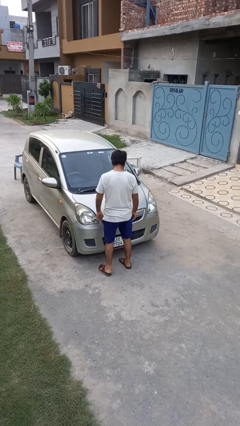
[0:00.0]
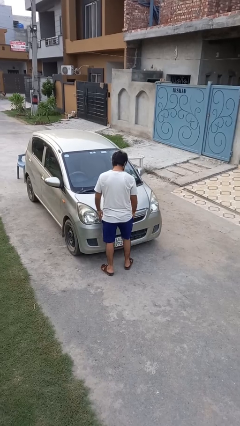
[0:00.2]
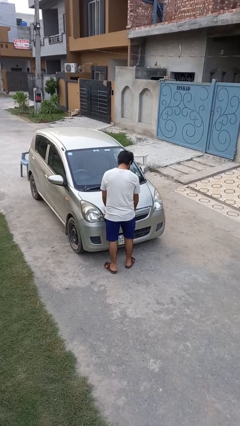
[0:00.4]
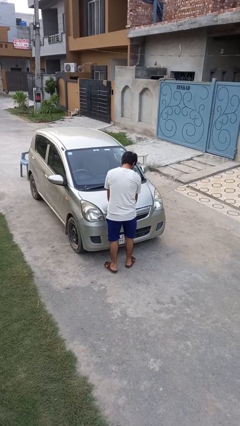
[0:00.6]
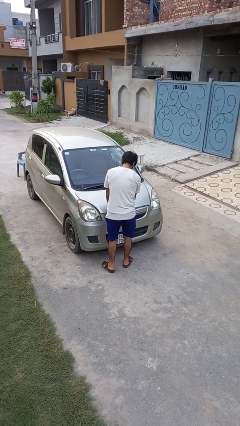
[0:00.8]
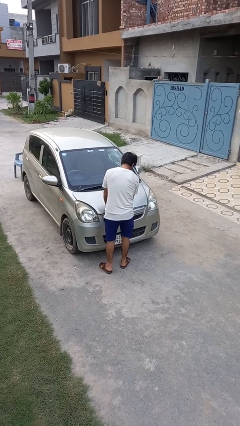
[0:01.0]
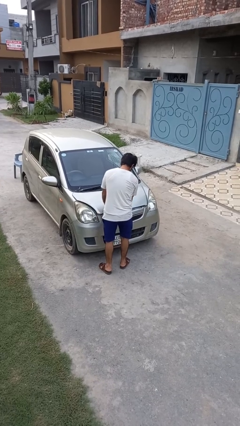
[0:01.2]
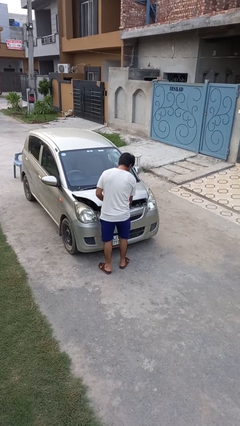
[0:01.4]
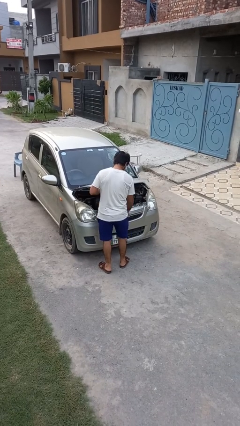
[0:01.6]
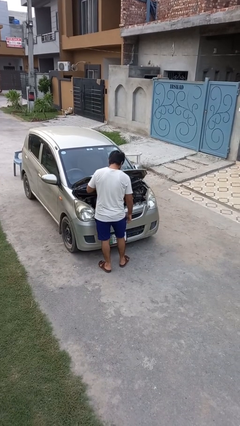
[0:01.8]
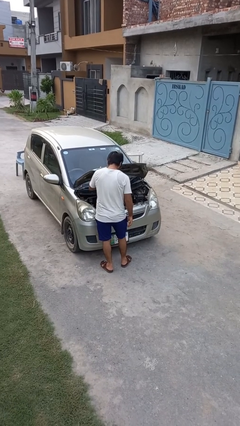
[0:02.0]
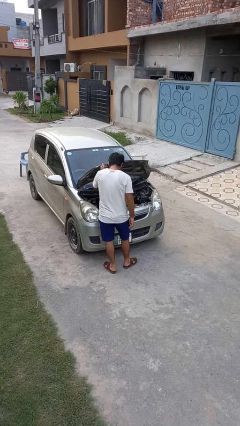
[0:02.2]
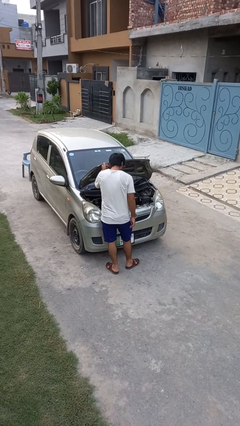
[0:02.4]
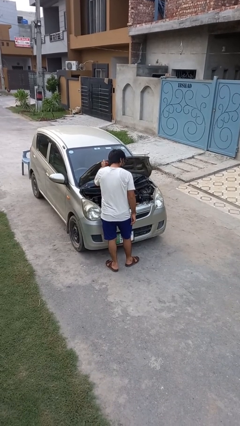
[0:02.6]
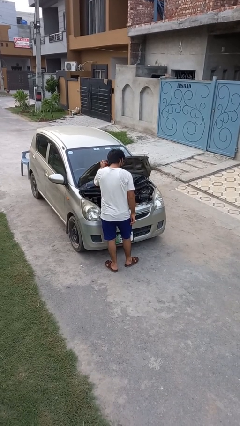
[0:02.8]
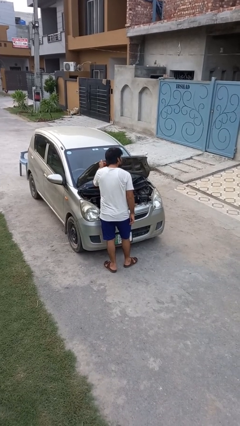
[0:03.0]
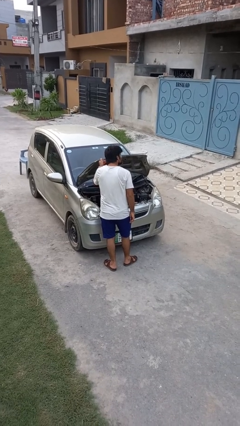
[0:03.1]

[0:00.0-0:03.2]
person opens car hood

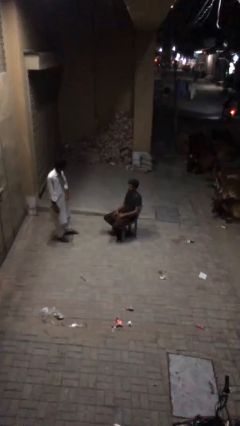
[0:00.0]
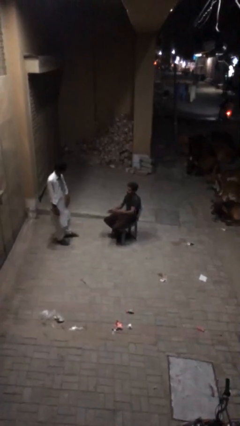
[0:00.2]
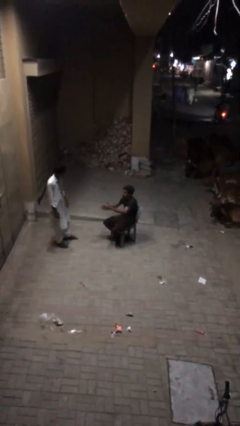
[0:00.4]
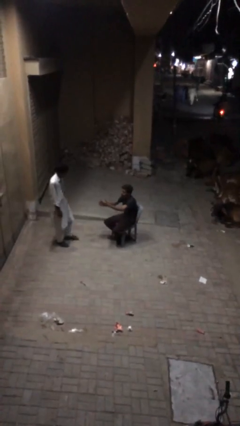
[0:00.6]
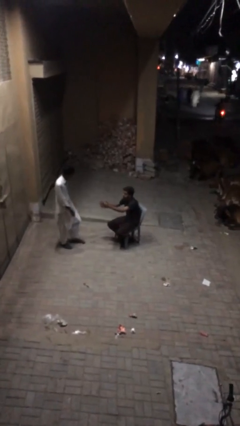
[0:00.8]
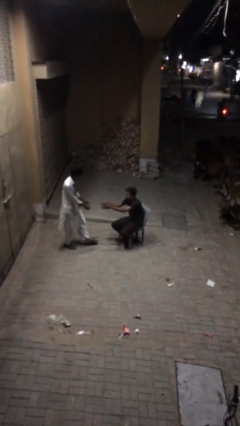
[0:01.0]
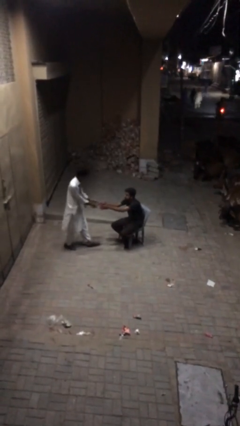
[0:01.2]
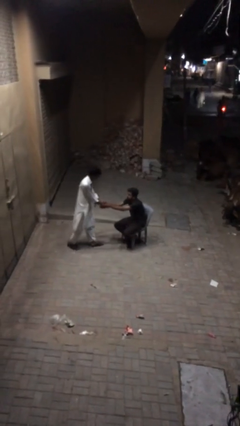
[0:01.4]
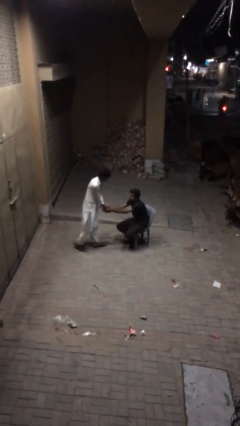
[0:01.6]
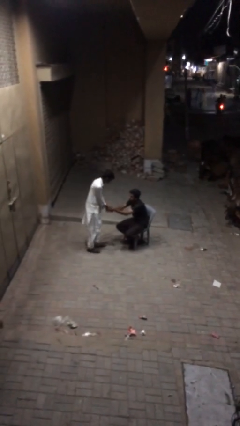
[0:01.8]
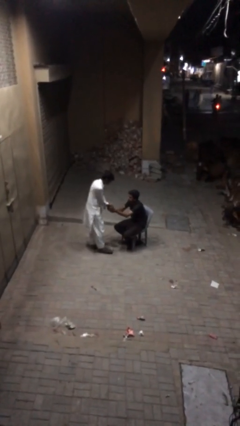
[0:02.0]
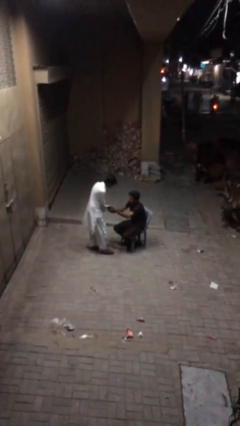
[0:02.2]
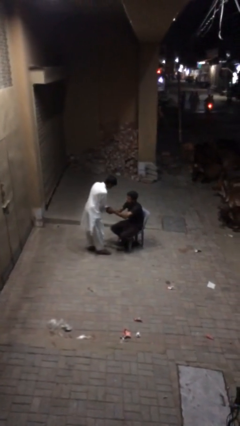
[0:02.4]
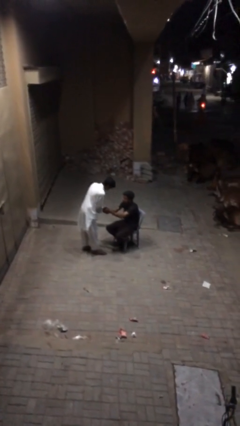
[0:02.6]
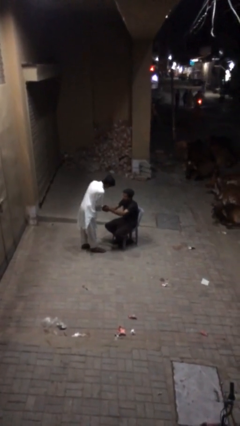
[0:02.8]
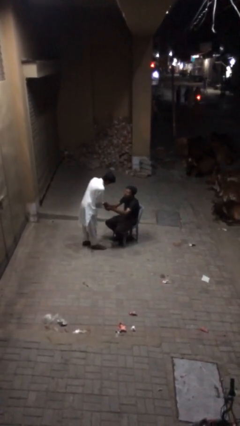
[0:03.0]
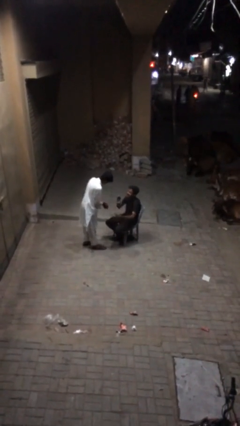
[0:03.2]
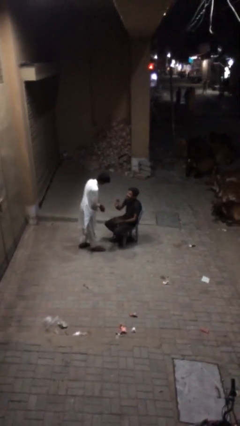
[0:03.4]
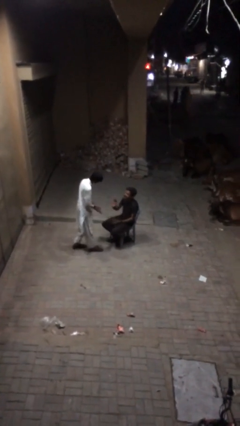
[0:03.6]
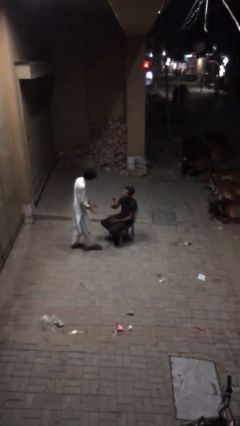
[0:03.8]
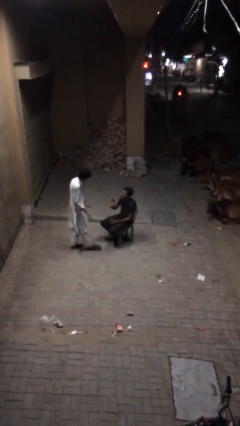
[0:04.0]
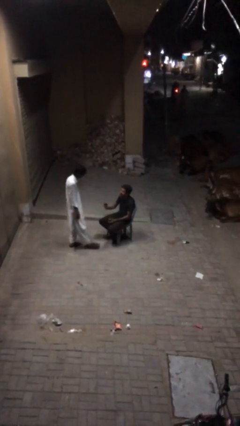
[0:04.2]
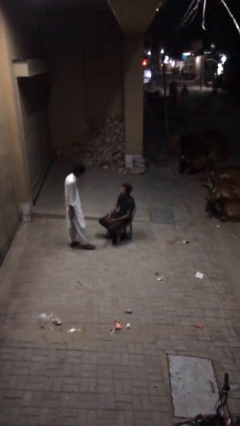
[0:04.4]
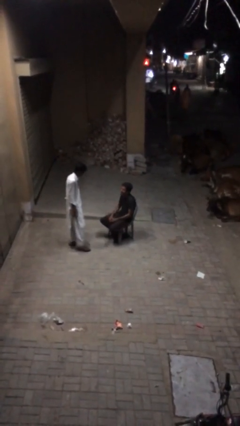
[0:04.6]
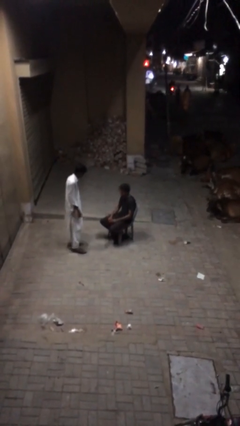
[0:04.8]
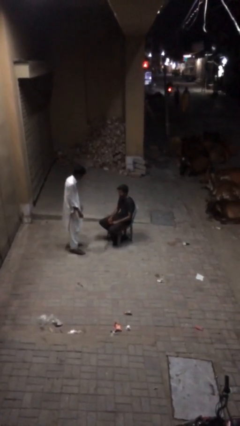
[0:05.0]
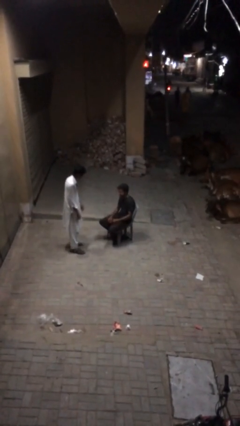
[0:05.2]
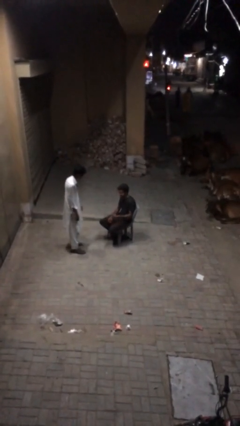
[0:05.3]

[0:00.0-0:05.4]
person shakes hand

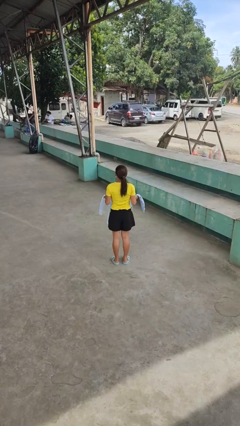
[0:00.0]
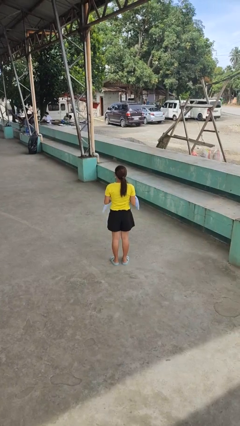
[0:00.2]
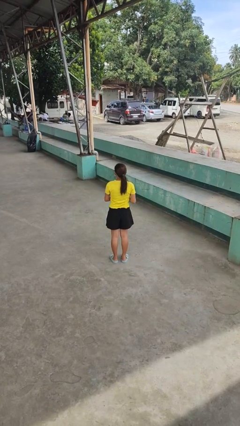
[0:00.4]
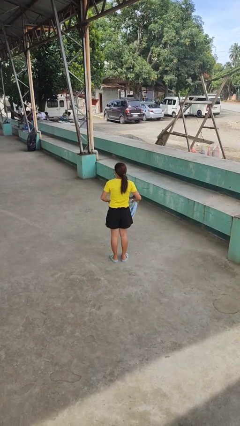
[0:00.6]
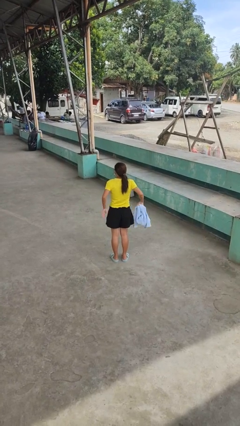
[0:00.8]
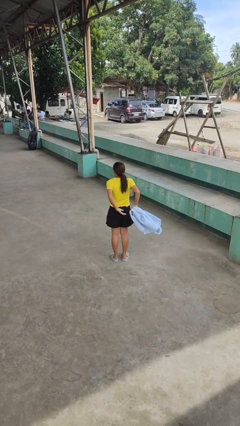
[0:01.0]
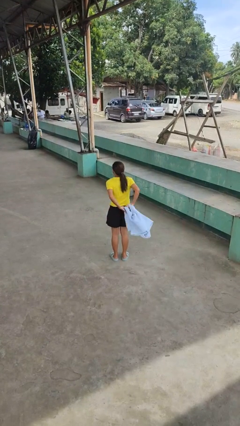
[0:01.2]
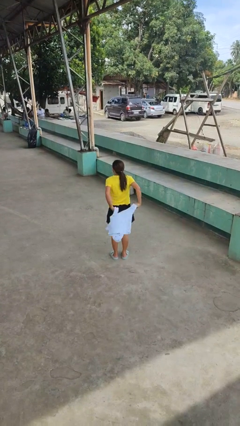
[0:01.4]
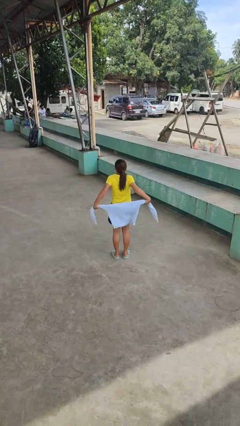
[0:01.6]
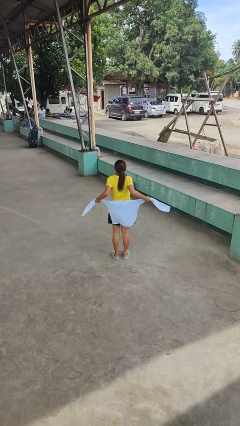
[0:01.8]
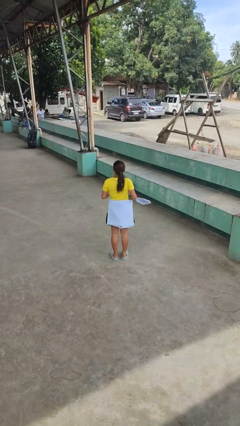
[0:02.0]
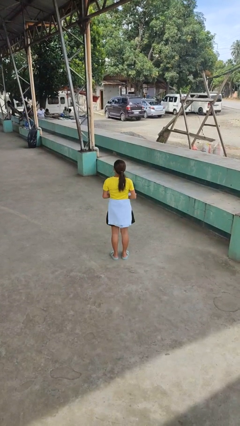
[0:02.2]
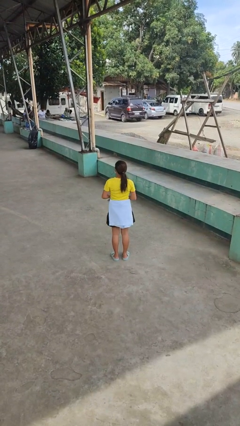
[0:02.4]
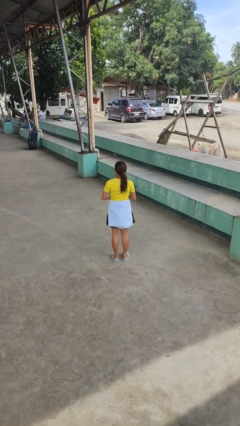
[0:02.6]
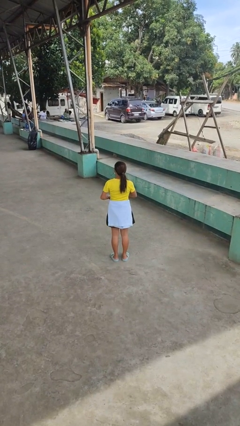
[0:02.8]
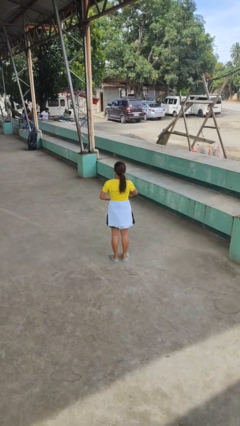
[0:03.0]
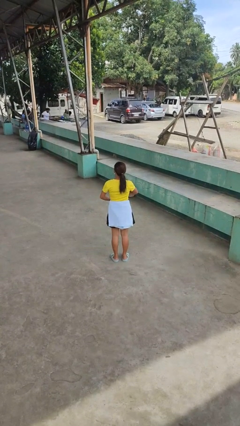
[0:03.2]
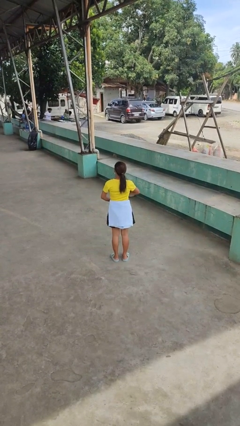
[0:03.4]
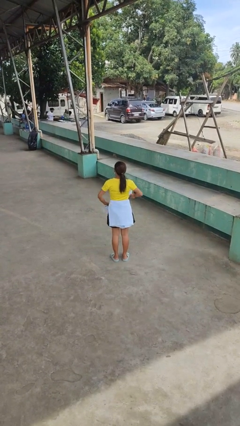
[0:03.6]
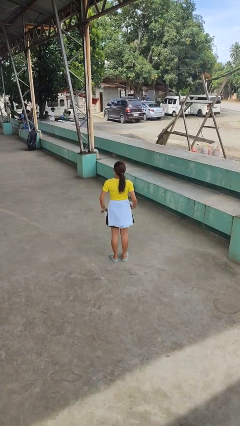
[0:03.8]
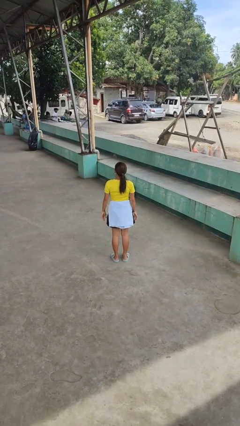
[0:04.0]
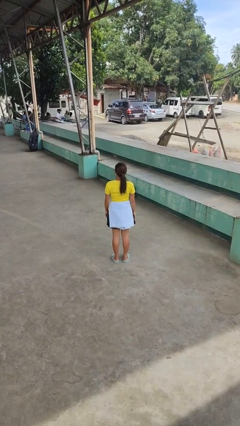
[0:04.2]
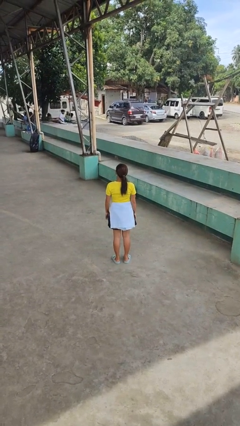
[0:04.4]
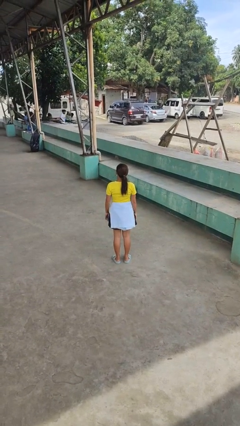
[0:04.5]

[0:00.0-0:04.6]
person ties jacket around waist

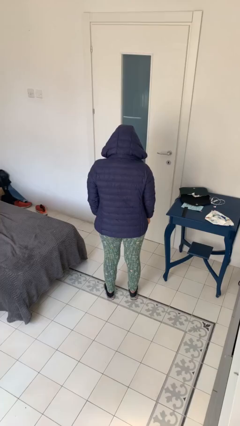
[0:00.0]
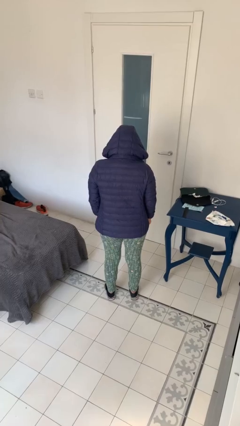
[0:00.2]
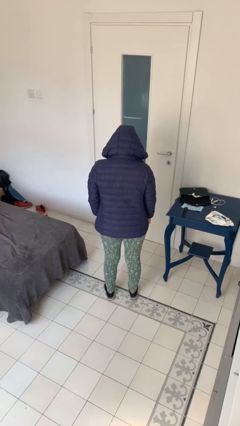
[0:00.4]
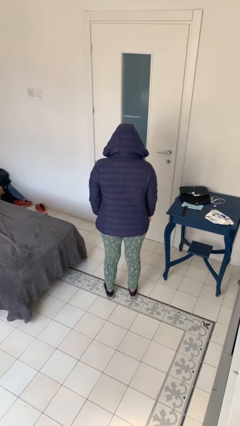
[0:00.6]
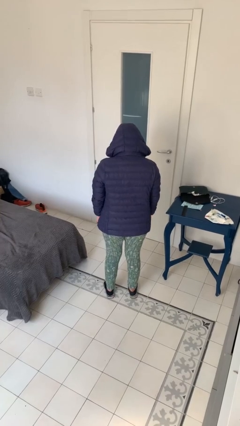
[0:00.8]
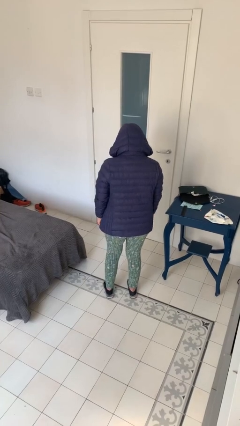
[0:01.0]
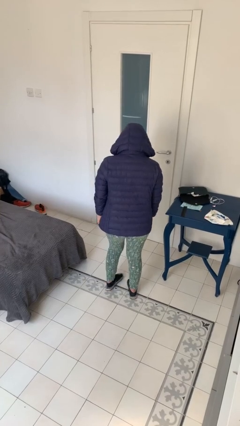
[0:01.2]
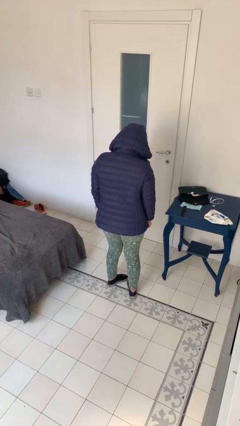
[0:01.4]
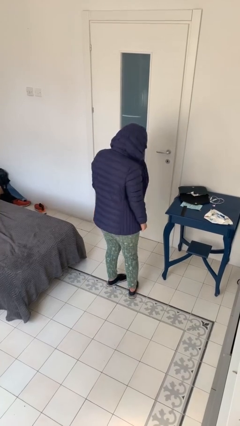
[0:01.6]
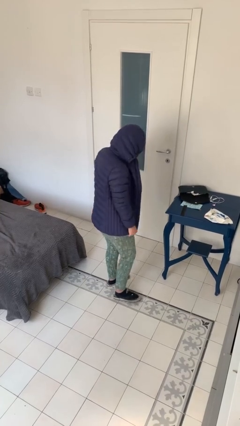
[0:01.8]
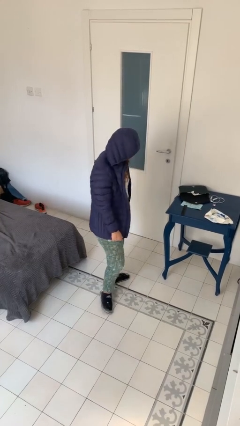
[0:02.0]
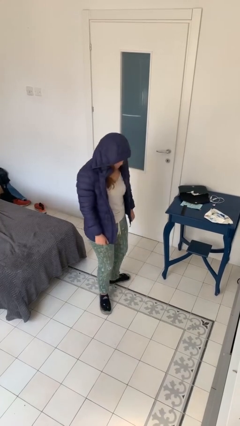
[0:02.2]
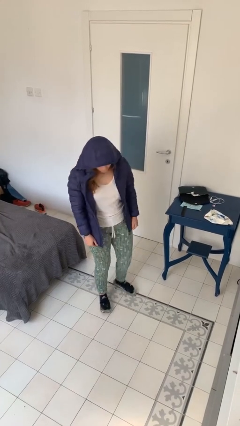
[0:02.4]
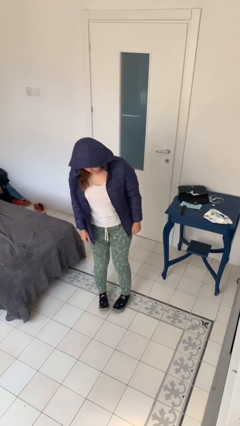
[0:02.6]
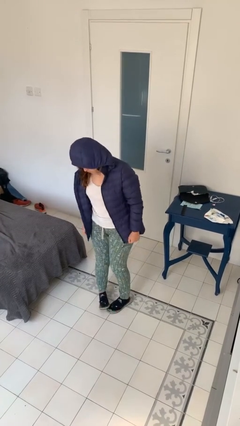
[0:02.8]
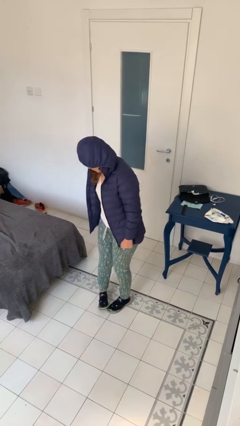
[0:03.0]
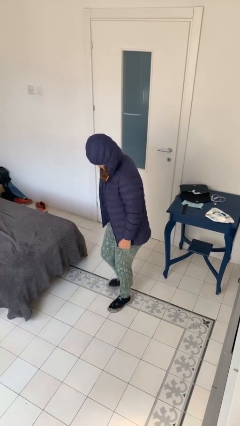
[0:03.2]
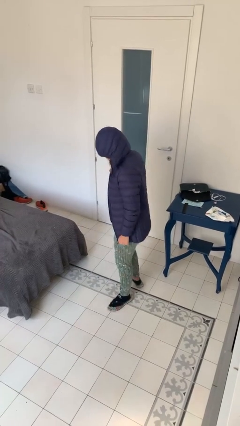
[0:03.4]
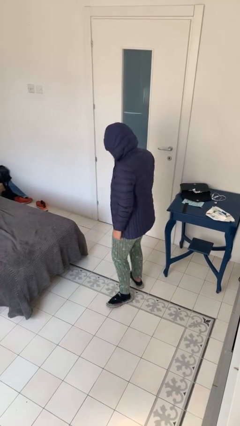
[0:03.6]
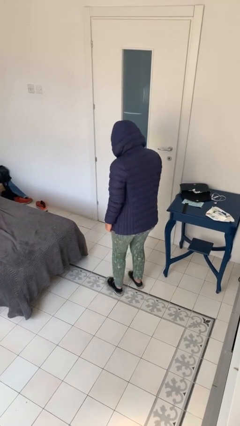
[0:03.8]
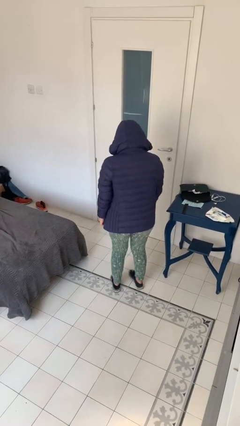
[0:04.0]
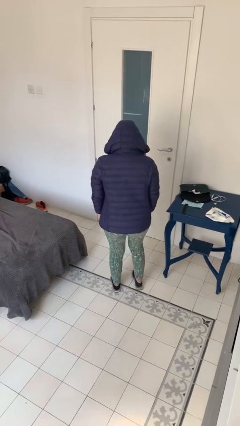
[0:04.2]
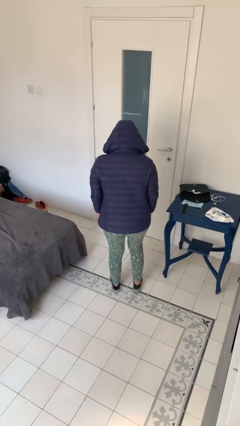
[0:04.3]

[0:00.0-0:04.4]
person twirls
